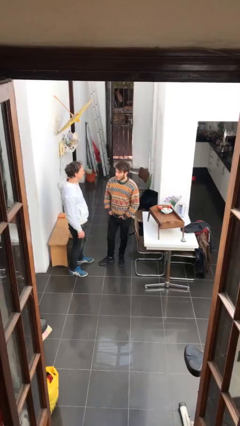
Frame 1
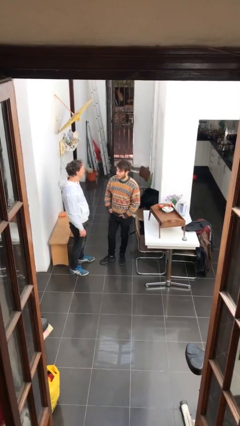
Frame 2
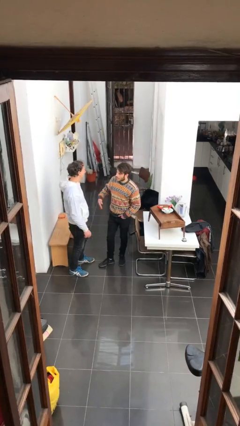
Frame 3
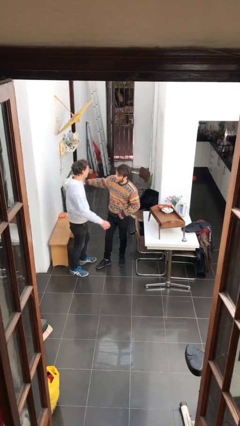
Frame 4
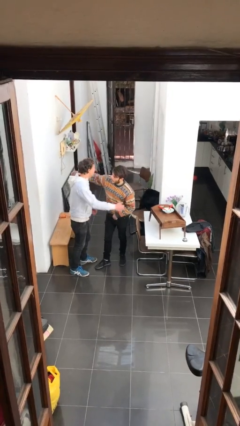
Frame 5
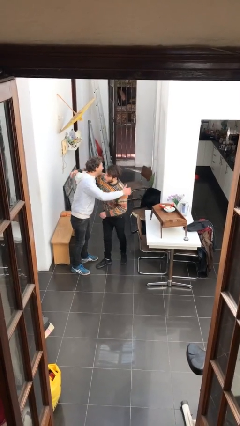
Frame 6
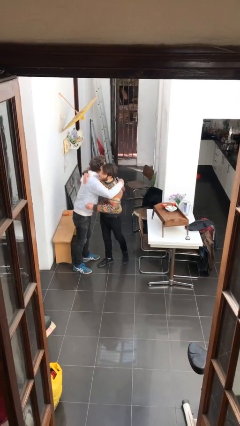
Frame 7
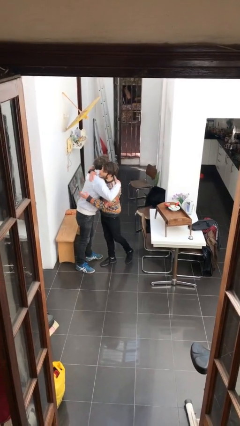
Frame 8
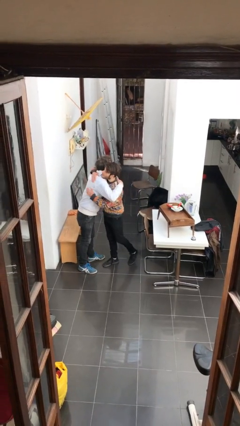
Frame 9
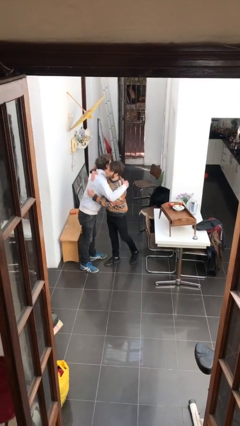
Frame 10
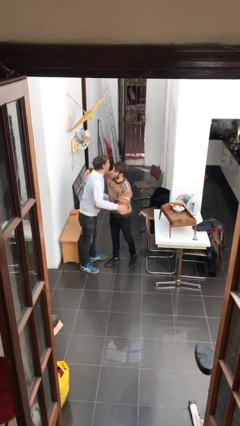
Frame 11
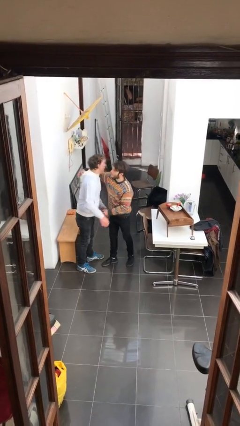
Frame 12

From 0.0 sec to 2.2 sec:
person embraces person

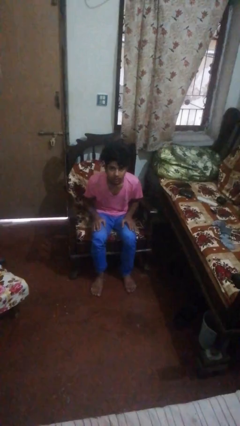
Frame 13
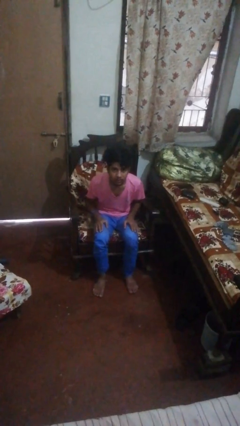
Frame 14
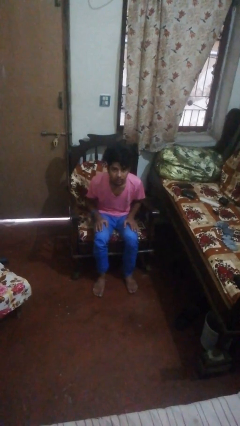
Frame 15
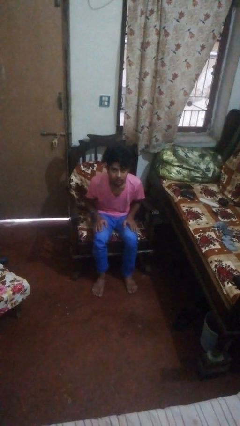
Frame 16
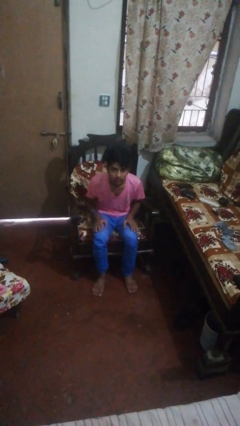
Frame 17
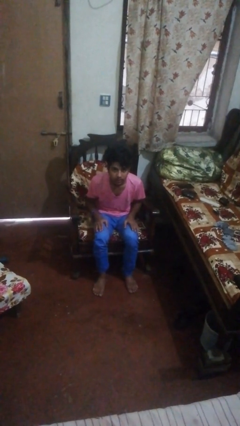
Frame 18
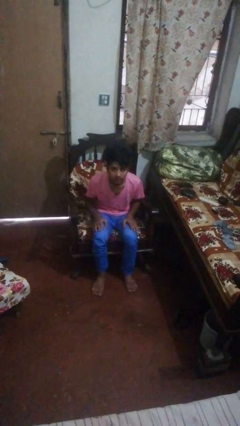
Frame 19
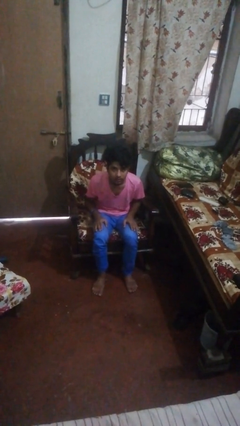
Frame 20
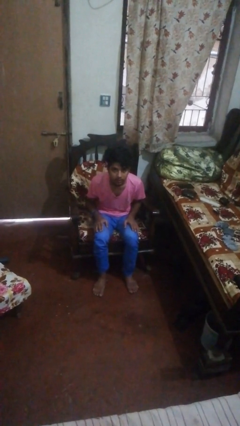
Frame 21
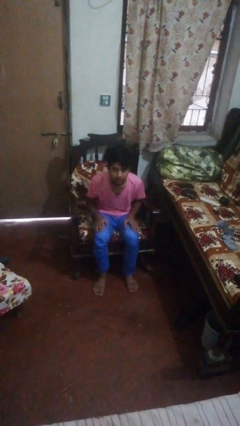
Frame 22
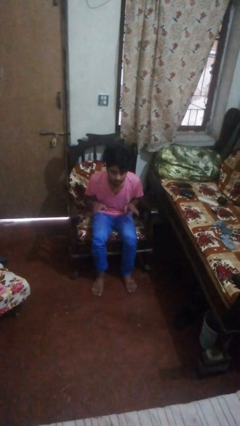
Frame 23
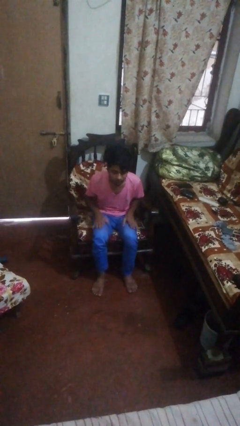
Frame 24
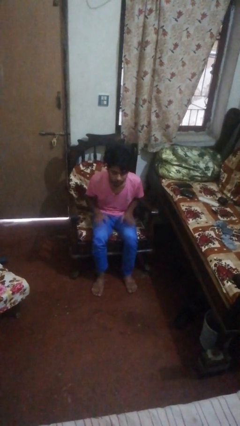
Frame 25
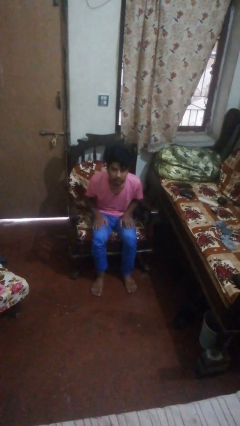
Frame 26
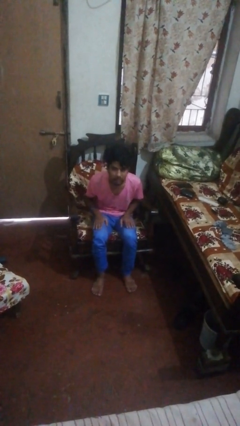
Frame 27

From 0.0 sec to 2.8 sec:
person slaps hands on thighs

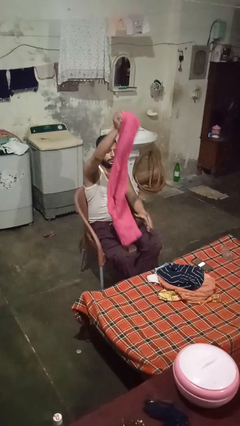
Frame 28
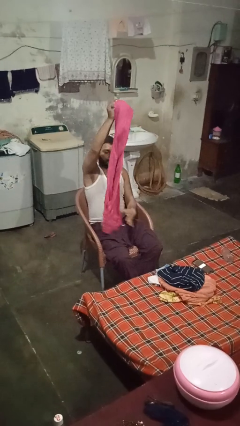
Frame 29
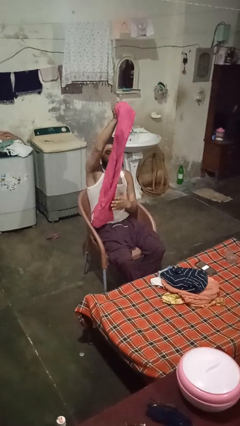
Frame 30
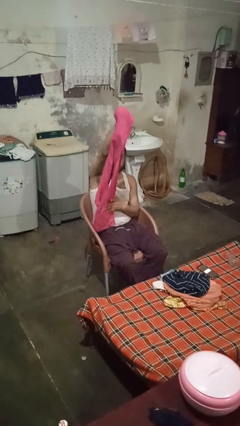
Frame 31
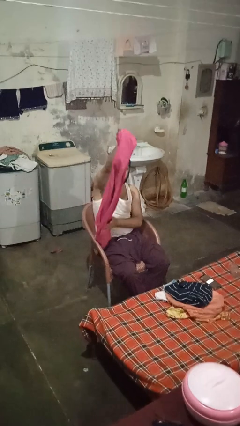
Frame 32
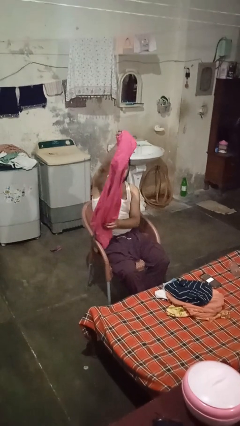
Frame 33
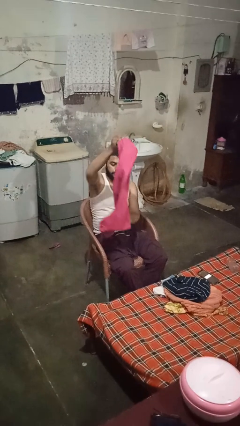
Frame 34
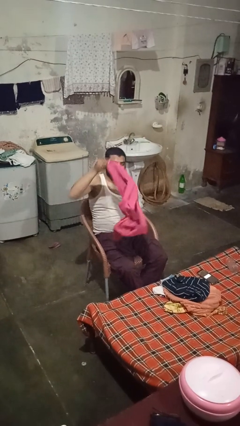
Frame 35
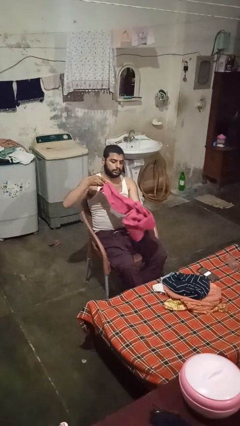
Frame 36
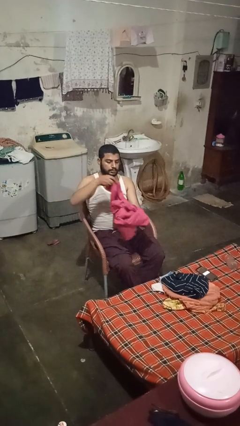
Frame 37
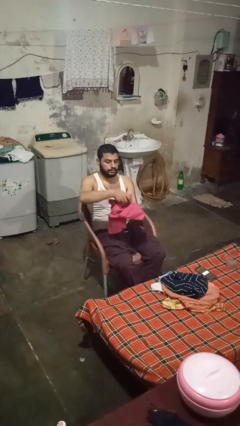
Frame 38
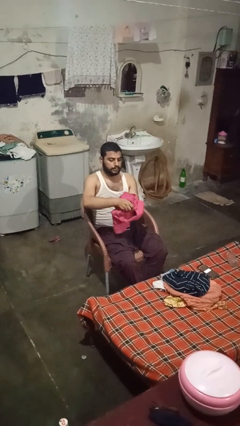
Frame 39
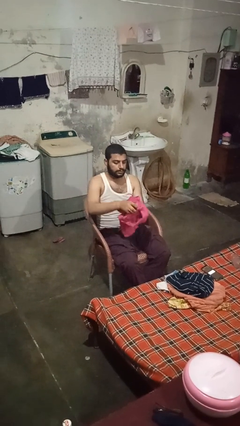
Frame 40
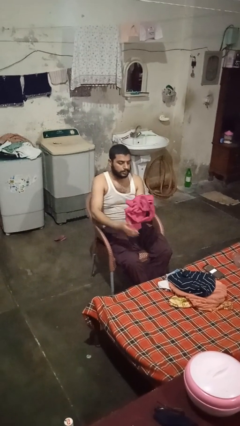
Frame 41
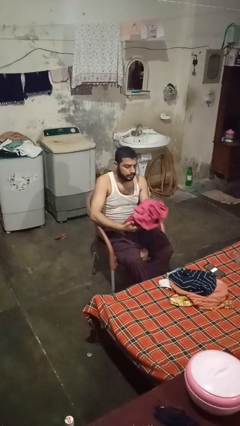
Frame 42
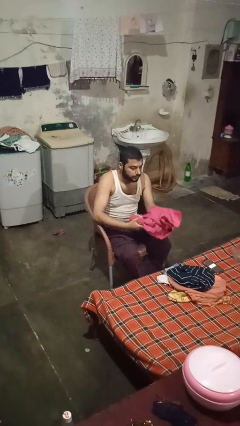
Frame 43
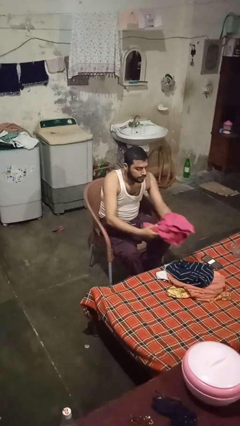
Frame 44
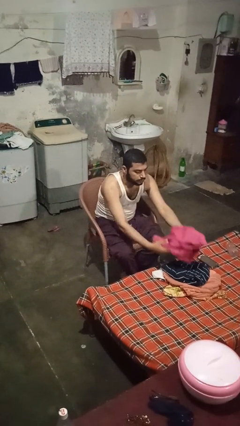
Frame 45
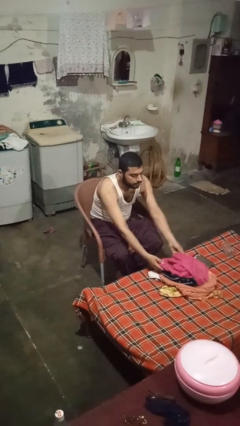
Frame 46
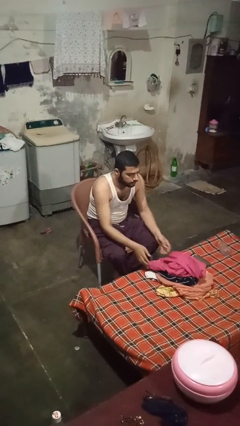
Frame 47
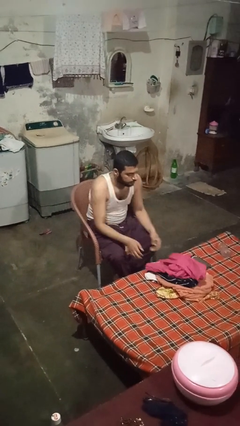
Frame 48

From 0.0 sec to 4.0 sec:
person folds pants

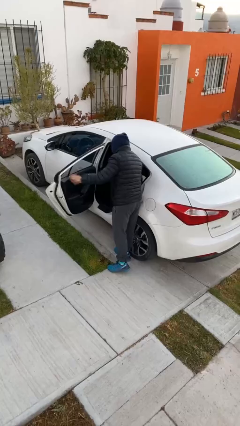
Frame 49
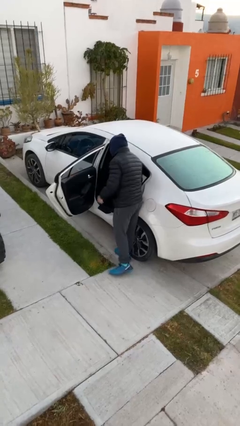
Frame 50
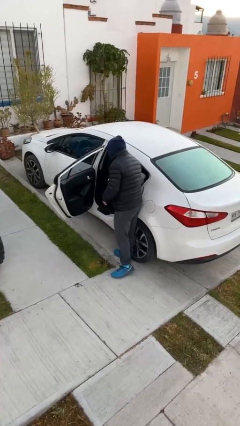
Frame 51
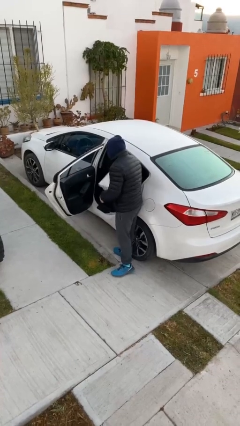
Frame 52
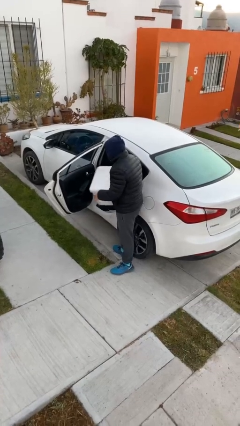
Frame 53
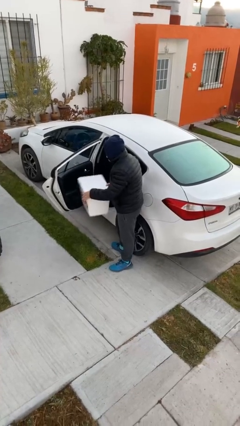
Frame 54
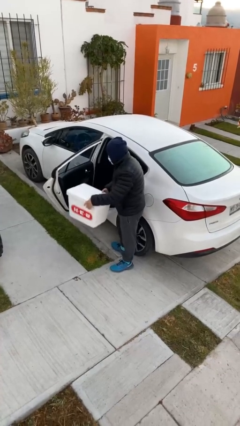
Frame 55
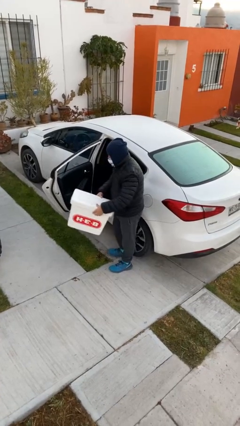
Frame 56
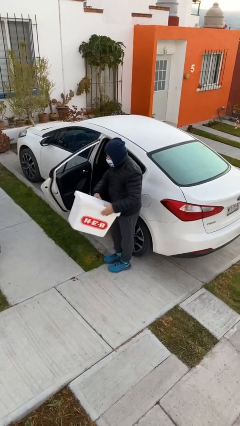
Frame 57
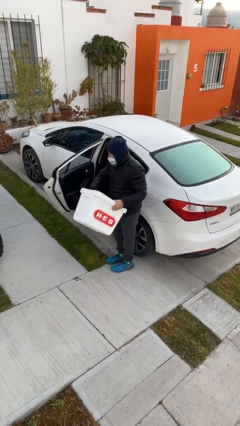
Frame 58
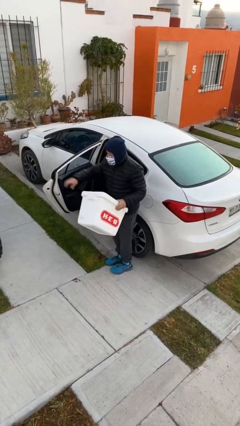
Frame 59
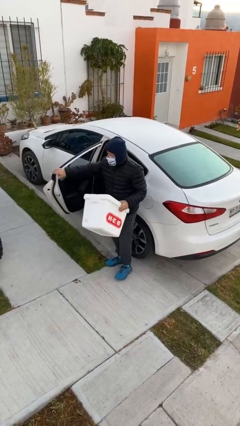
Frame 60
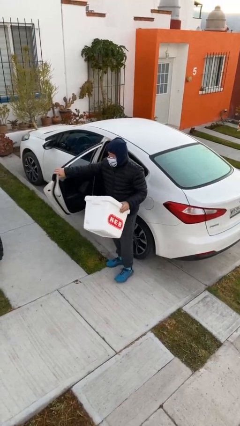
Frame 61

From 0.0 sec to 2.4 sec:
person unloads car

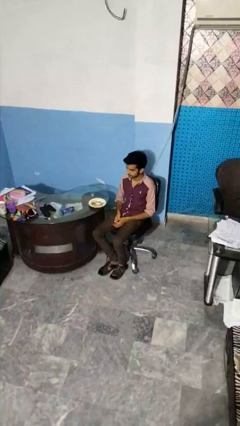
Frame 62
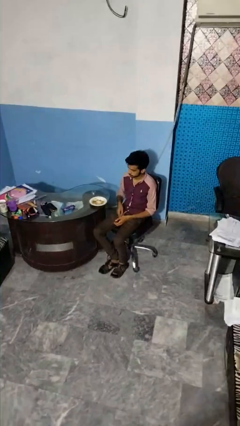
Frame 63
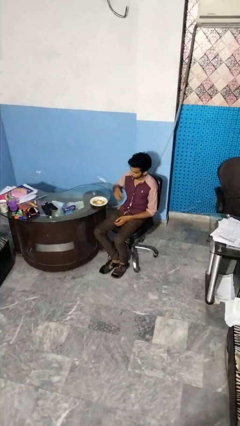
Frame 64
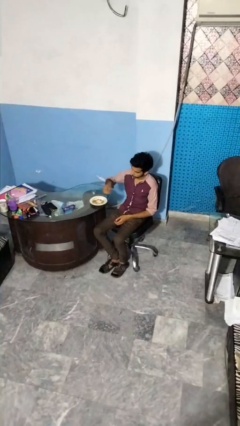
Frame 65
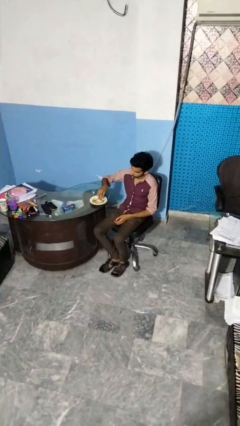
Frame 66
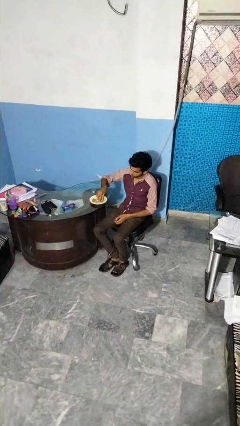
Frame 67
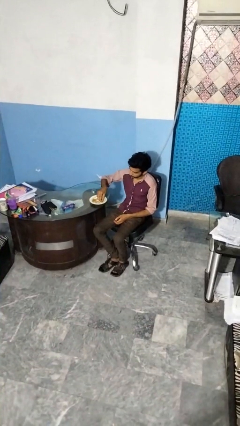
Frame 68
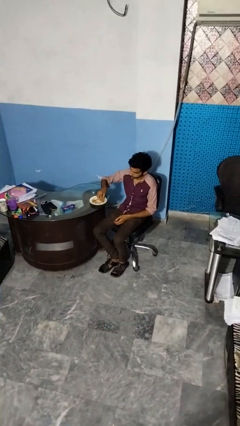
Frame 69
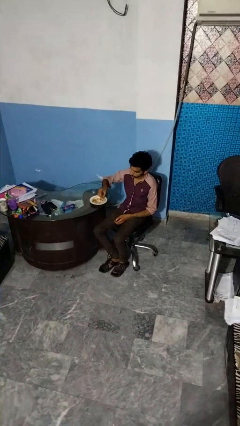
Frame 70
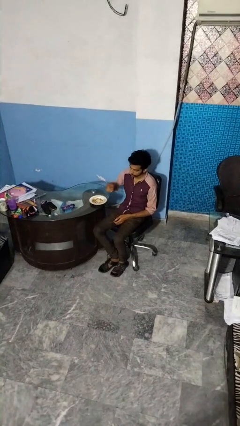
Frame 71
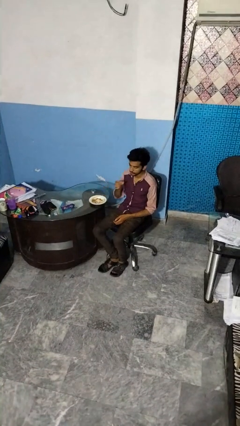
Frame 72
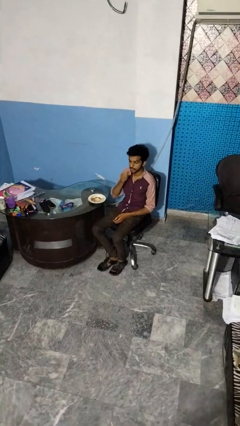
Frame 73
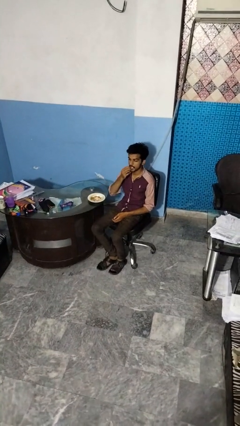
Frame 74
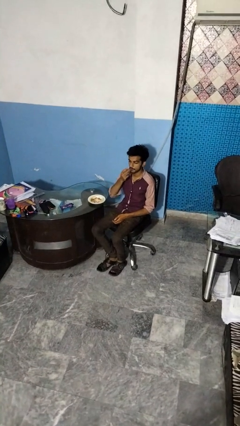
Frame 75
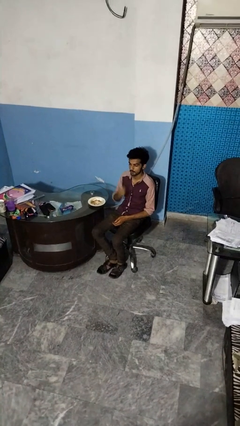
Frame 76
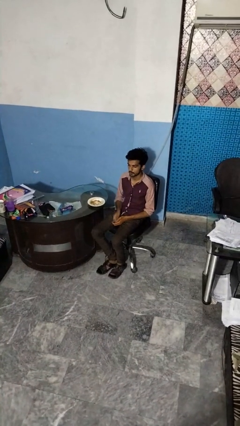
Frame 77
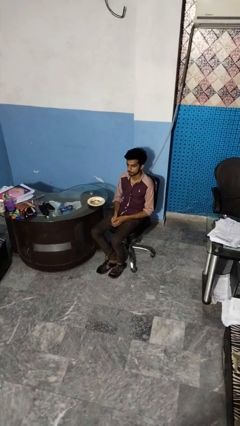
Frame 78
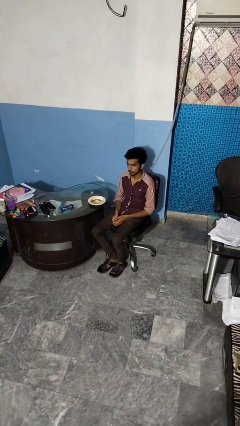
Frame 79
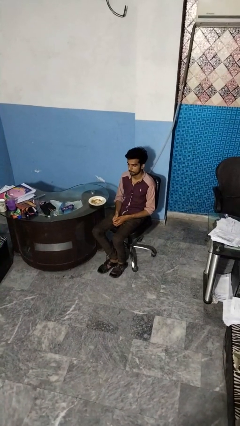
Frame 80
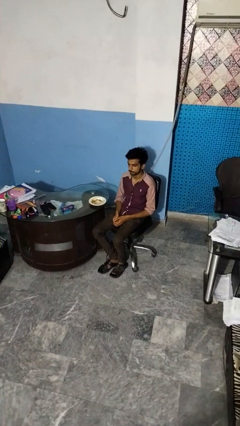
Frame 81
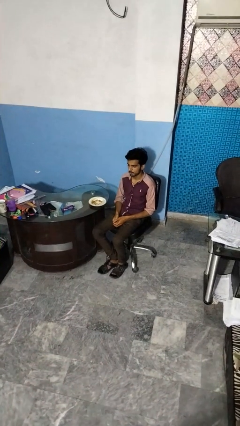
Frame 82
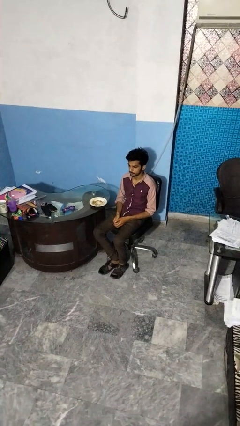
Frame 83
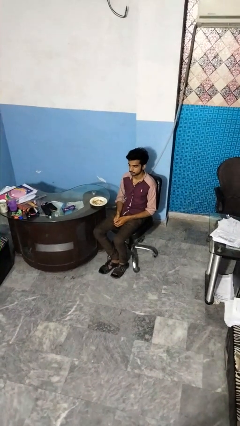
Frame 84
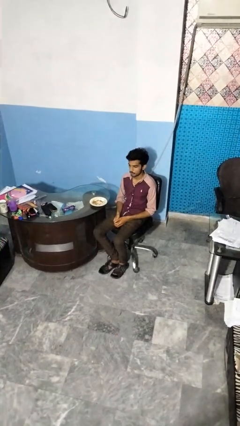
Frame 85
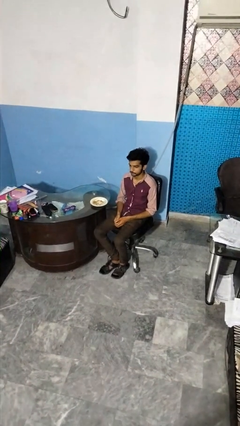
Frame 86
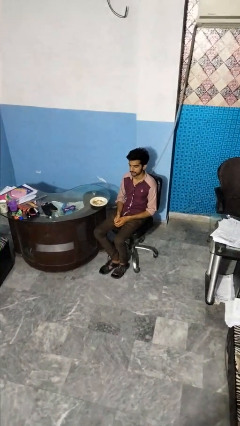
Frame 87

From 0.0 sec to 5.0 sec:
person eats with hands

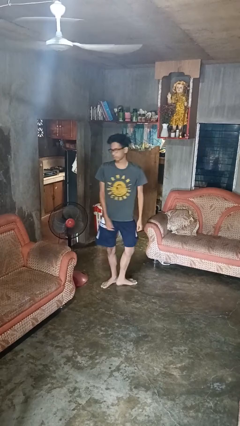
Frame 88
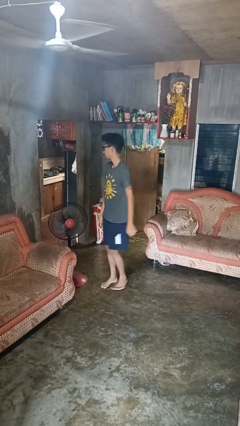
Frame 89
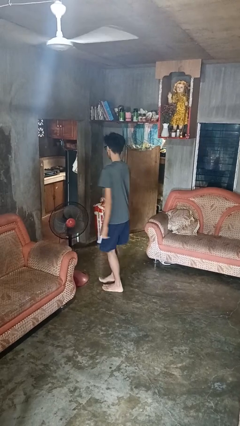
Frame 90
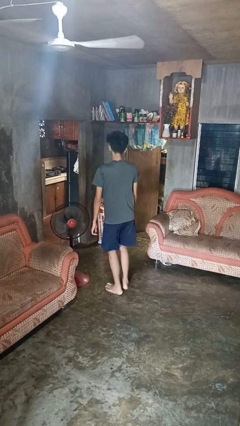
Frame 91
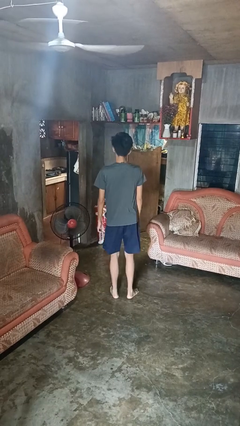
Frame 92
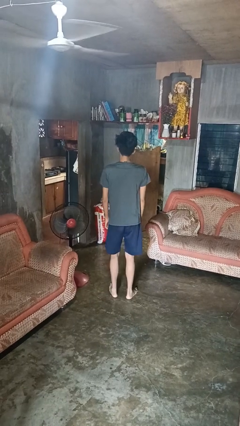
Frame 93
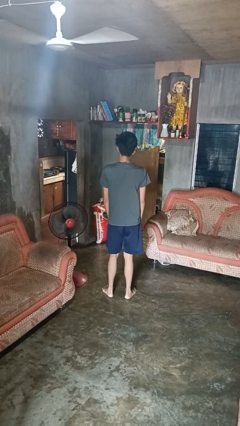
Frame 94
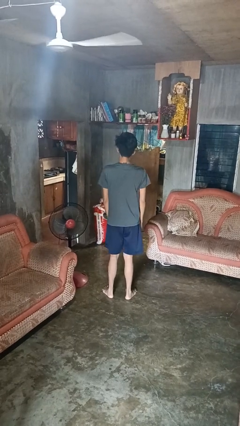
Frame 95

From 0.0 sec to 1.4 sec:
person twirls
